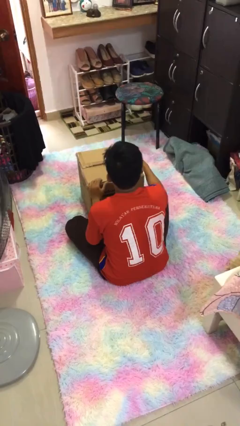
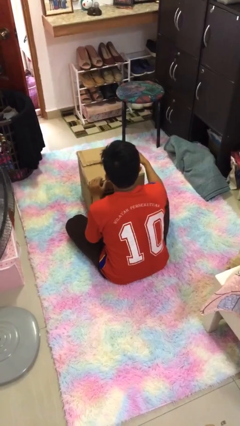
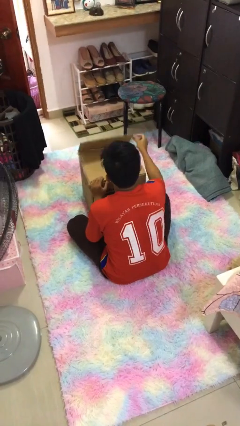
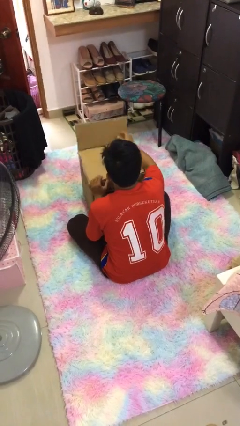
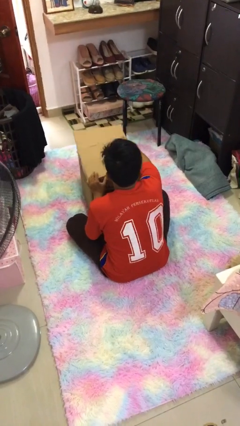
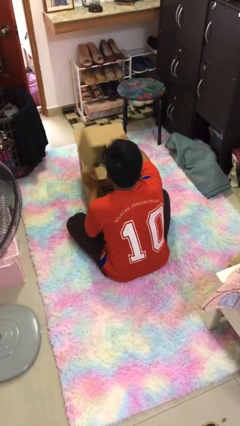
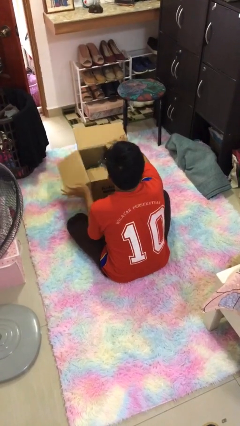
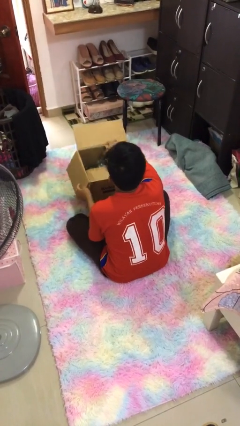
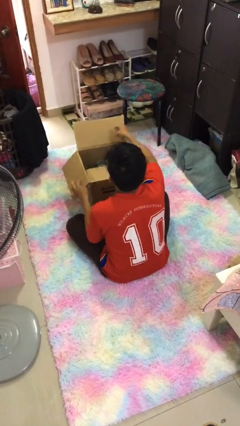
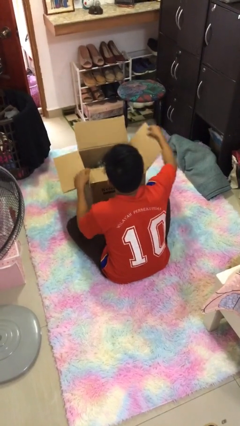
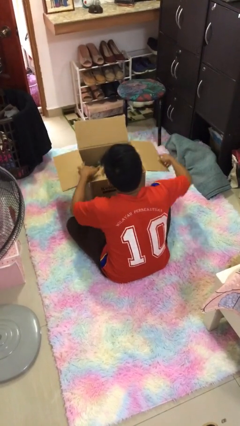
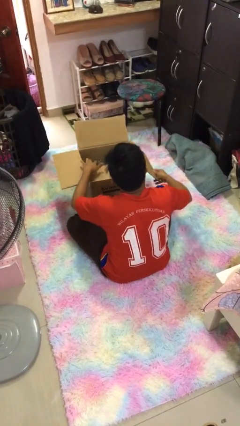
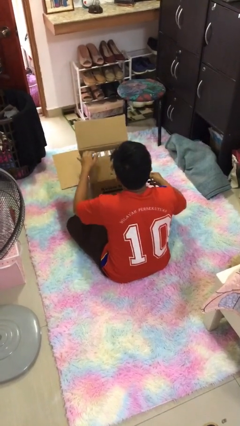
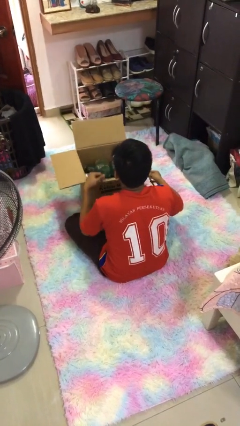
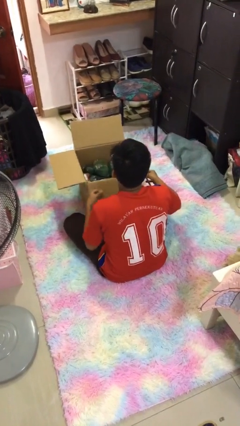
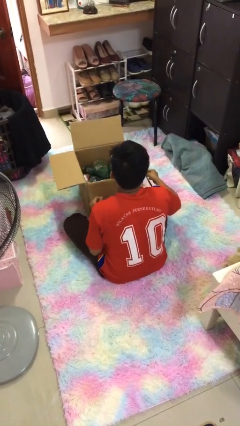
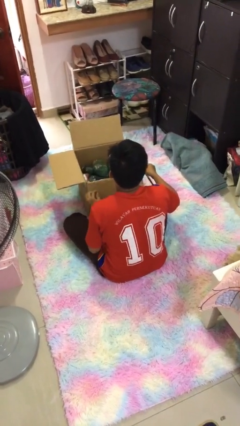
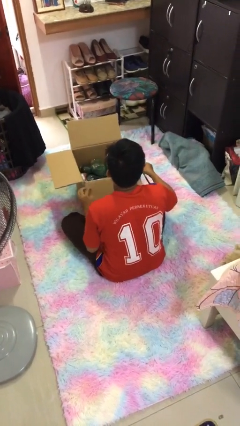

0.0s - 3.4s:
person opens box

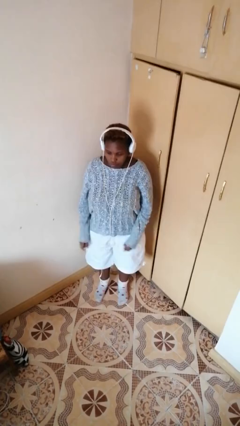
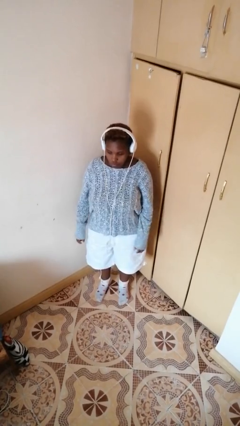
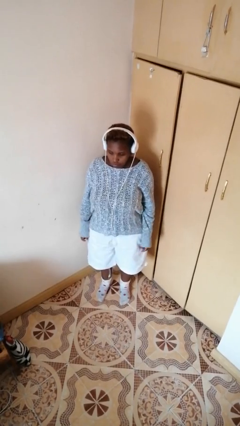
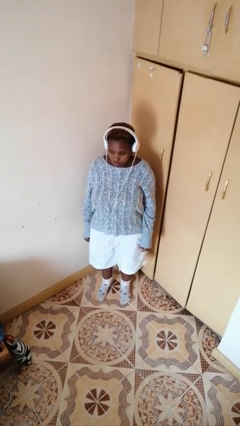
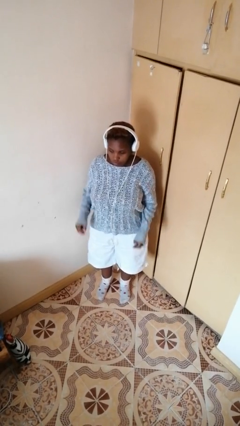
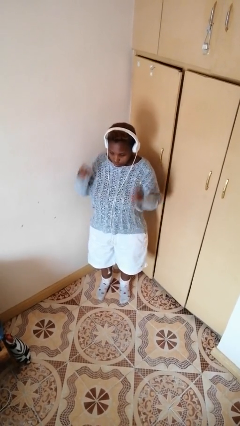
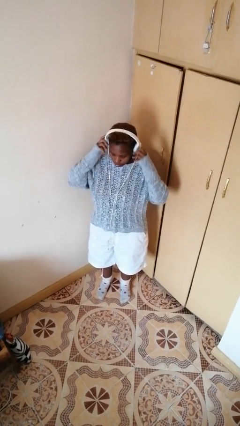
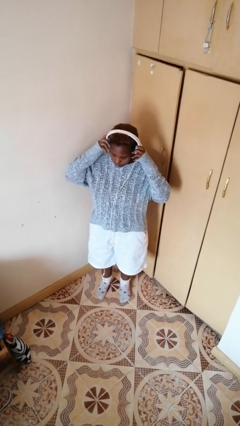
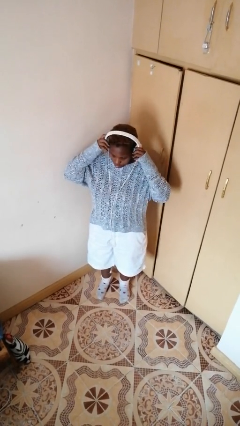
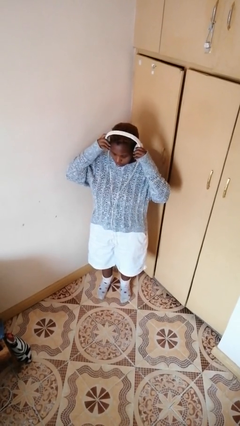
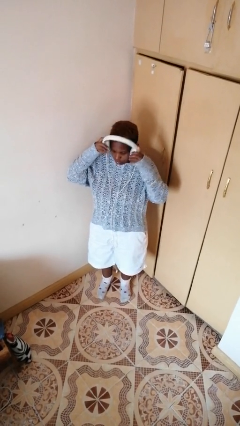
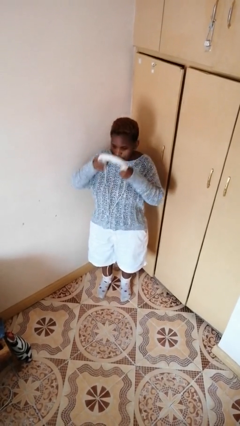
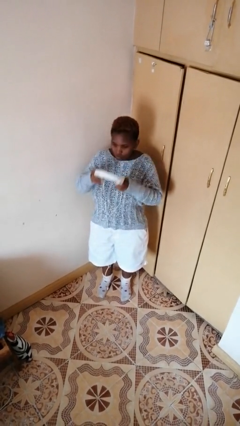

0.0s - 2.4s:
person takes off headphones

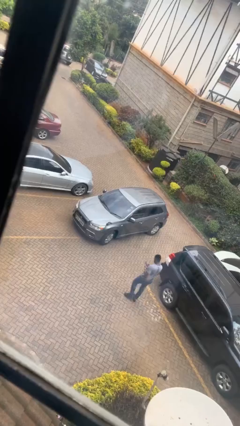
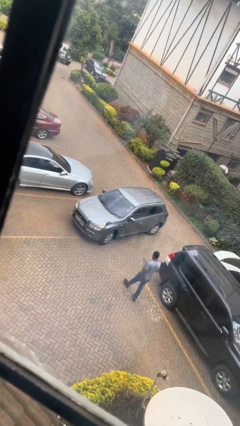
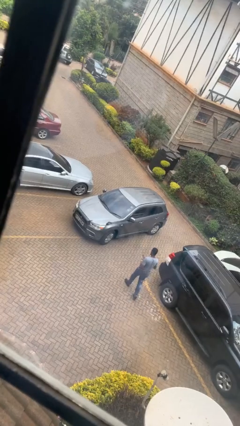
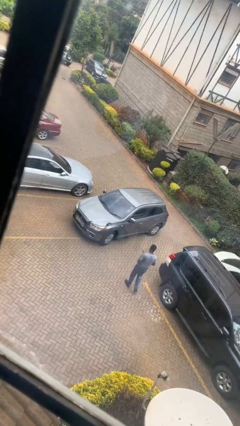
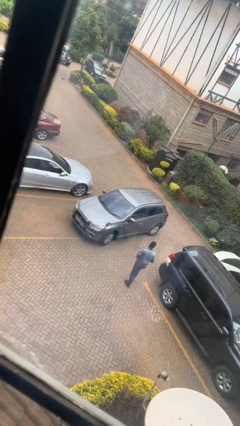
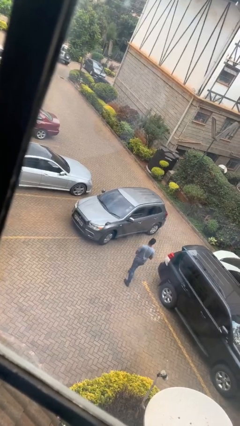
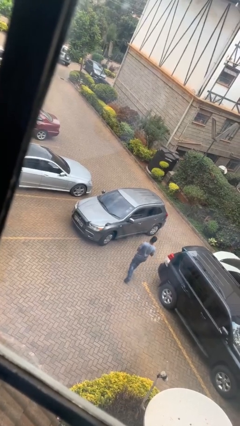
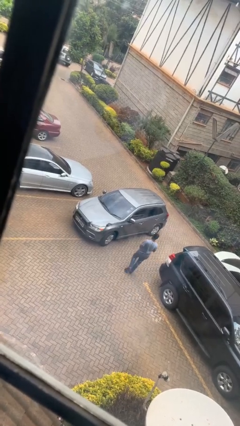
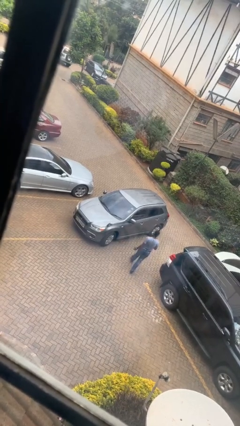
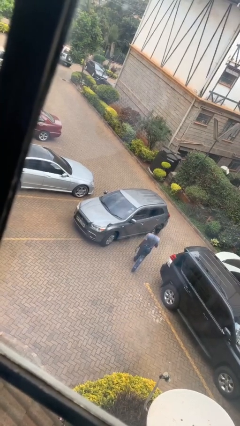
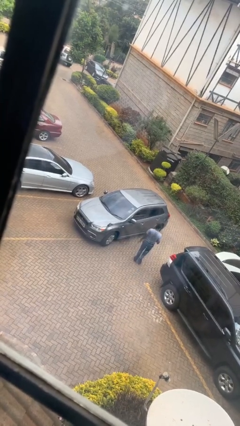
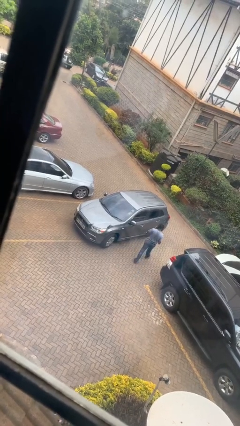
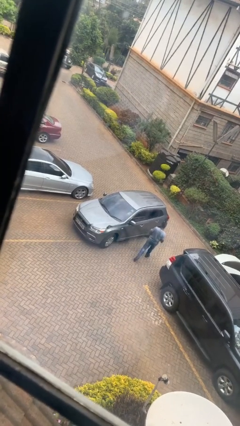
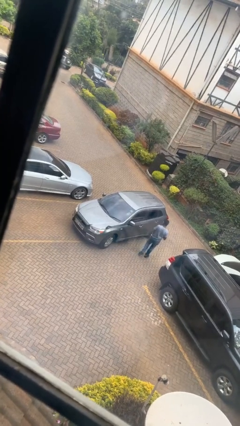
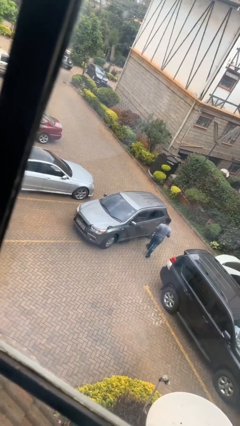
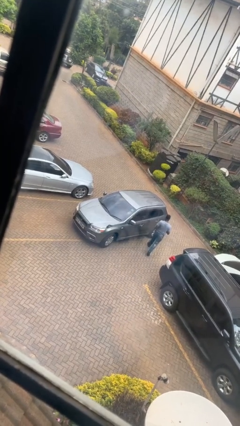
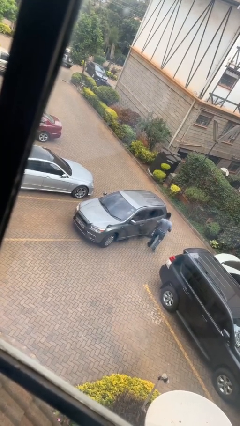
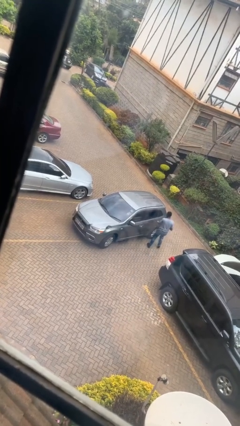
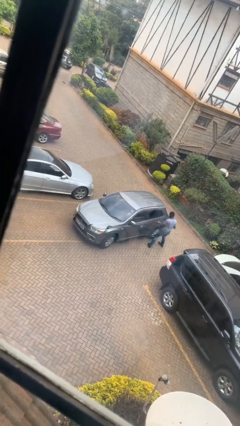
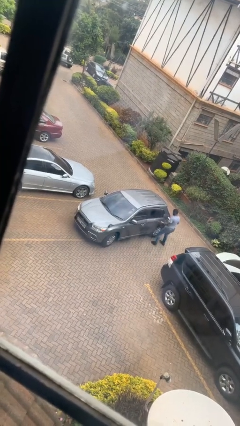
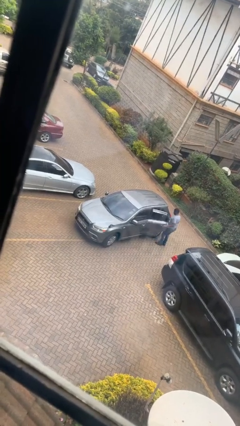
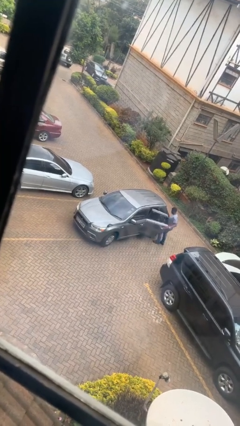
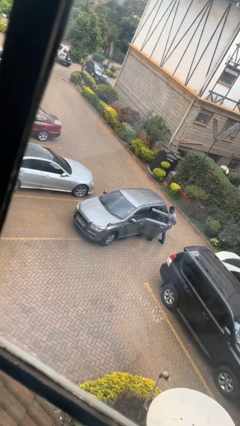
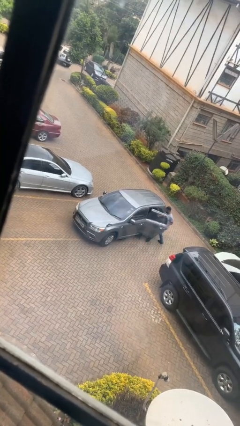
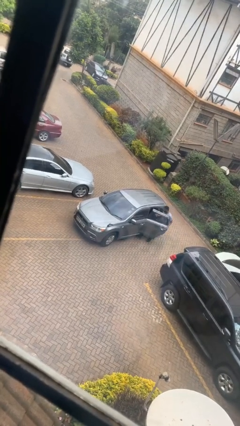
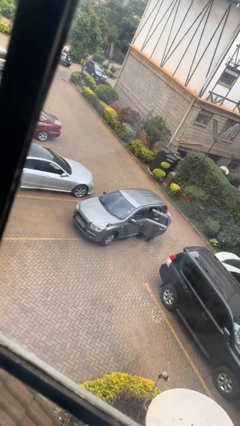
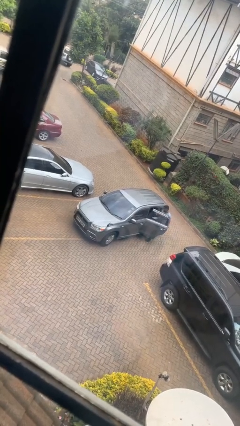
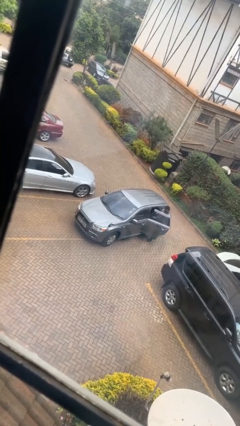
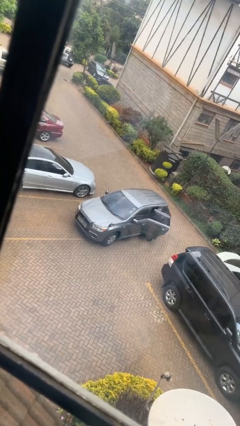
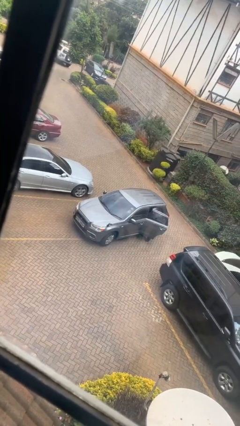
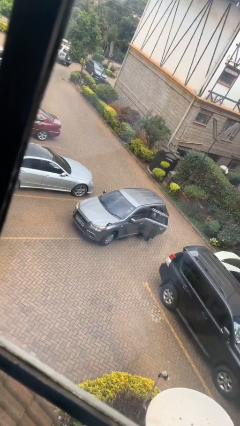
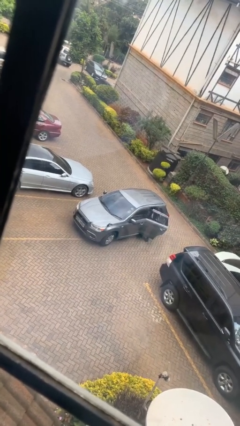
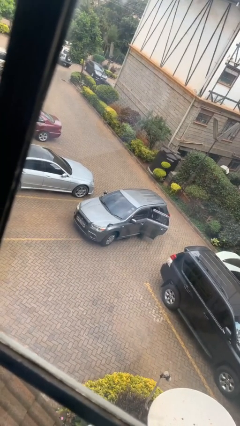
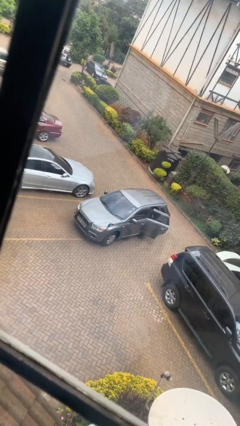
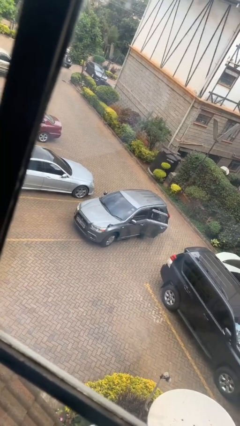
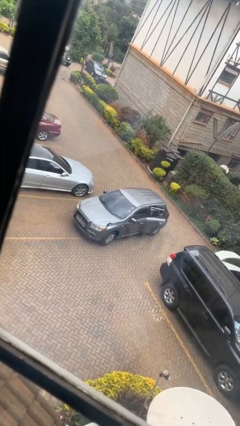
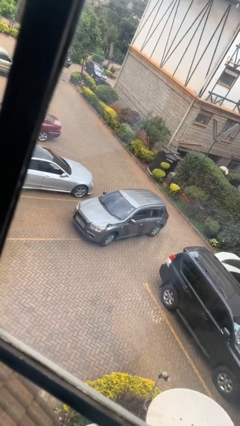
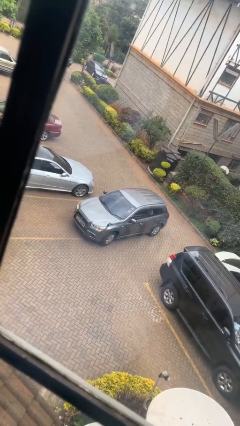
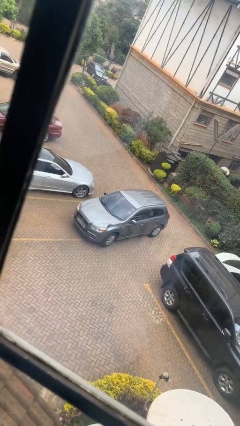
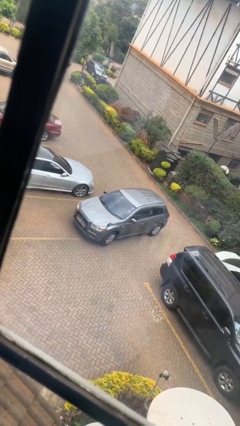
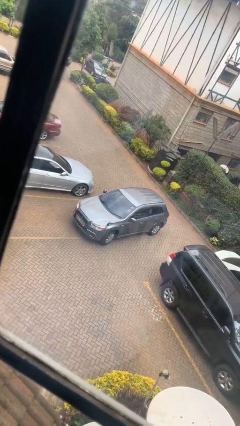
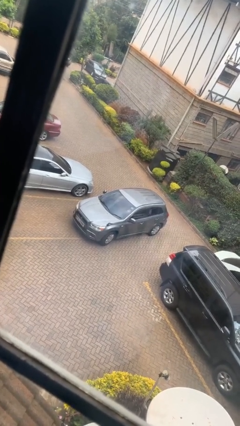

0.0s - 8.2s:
car picks up person

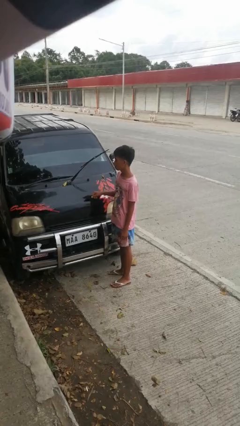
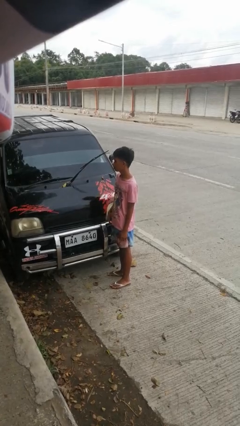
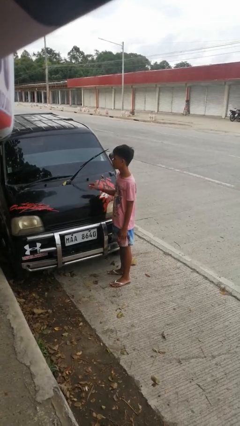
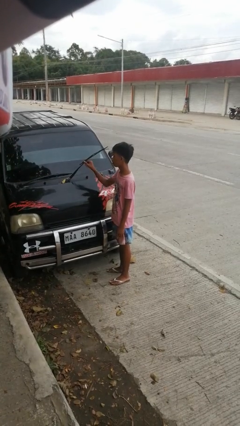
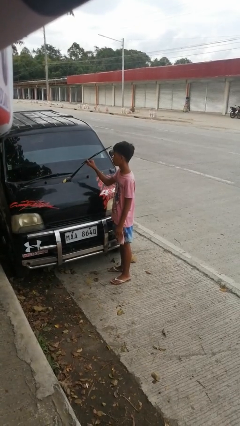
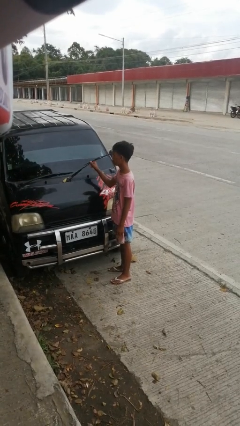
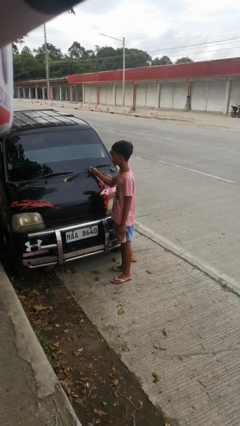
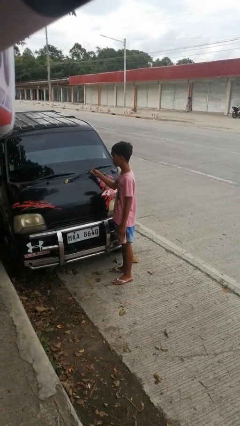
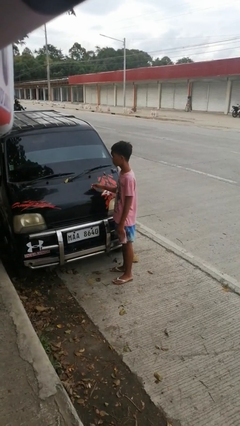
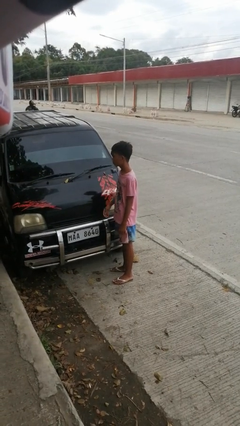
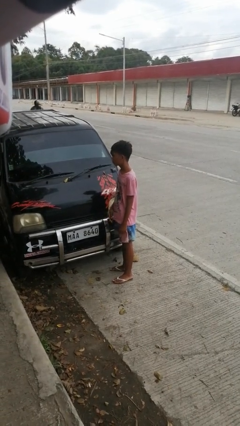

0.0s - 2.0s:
person flips down car wipers

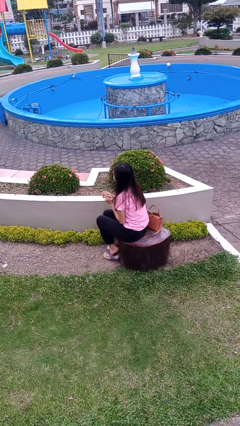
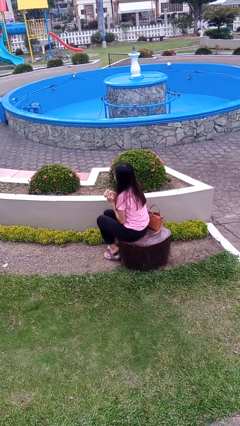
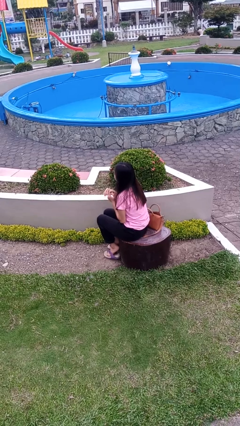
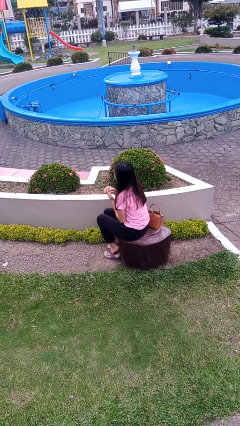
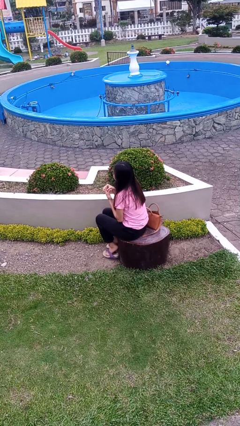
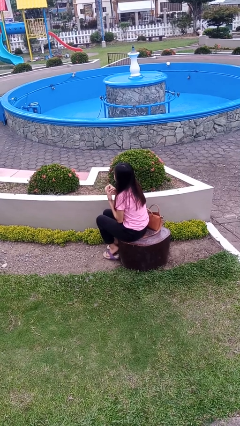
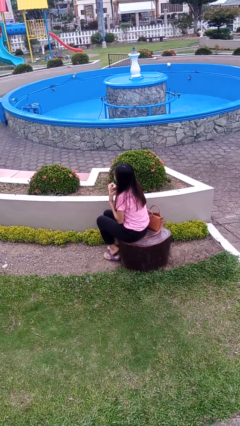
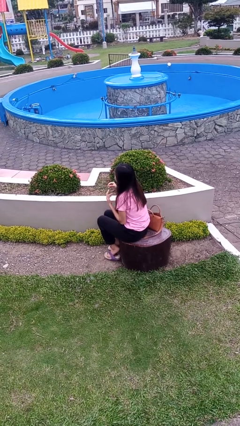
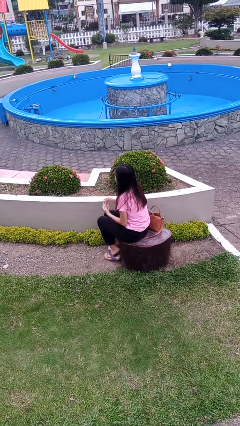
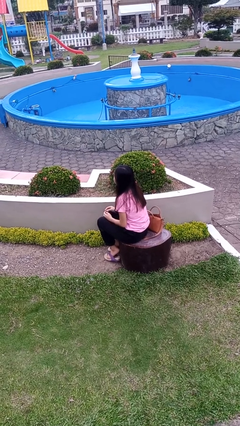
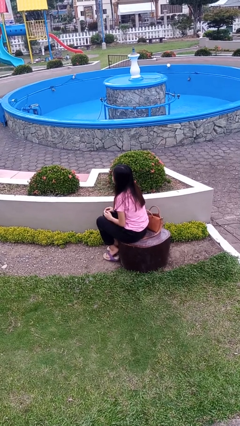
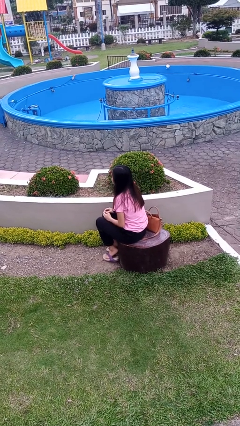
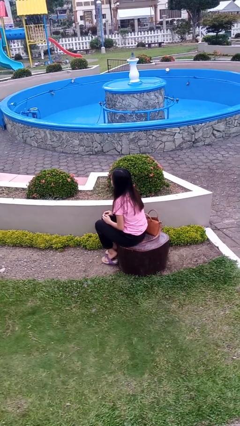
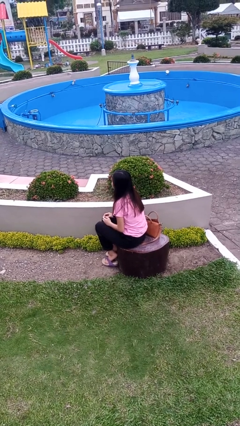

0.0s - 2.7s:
person takes off ring
